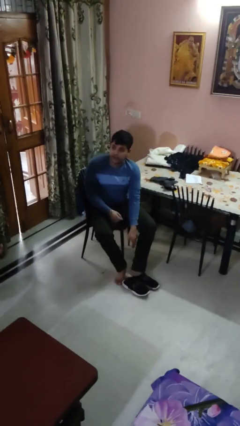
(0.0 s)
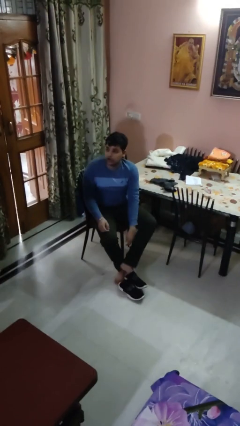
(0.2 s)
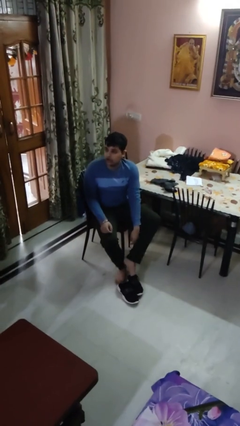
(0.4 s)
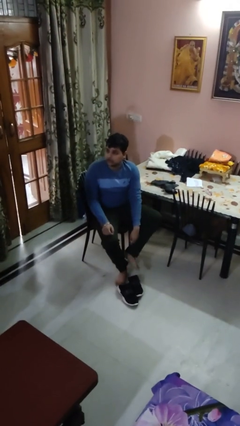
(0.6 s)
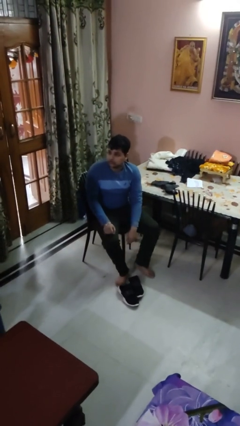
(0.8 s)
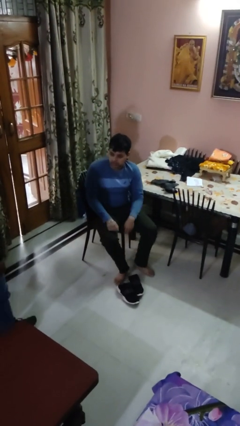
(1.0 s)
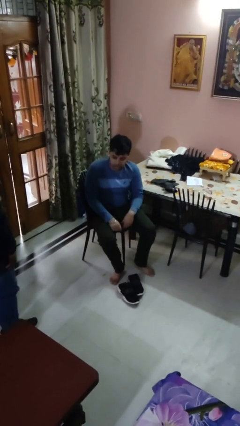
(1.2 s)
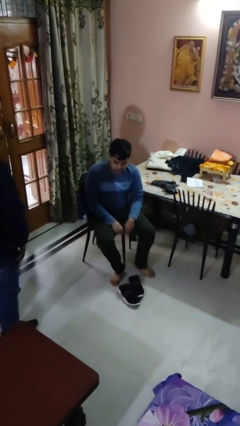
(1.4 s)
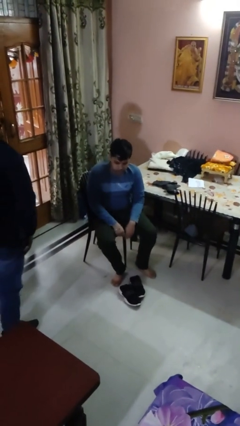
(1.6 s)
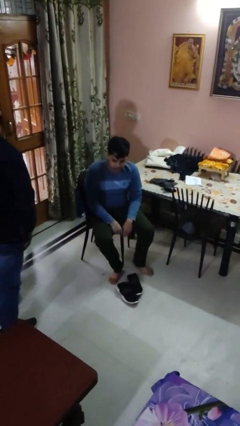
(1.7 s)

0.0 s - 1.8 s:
person takes off shoes

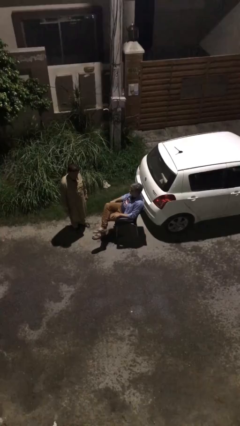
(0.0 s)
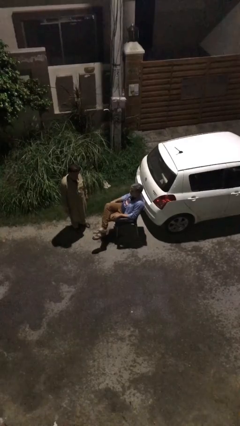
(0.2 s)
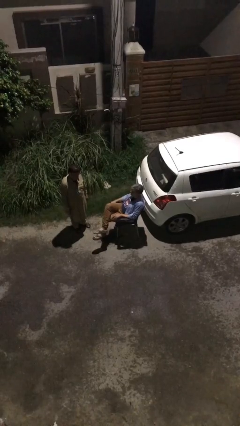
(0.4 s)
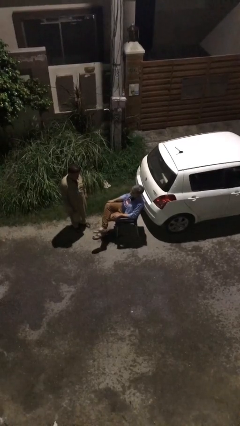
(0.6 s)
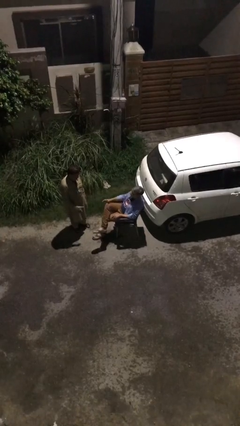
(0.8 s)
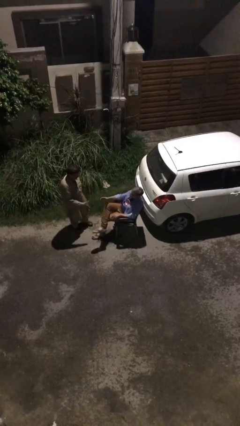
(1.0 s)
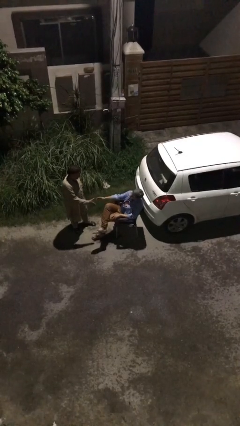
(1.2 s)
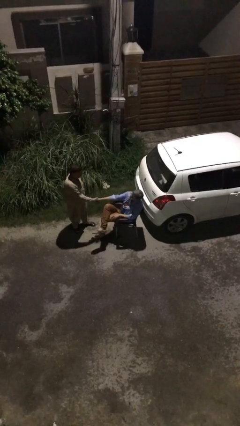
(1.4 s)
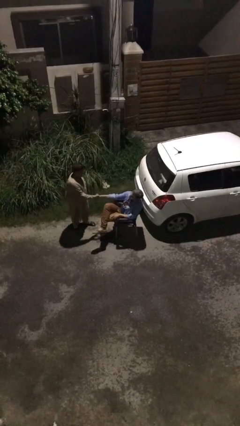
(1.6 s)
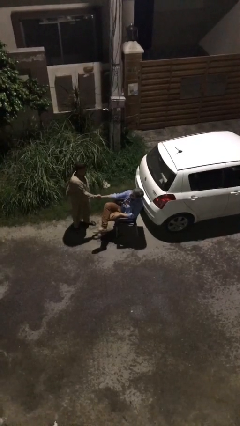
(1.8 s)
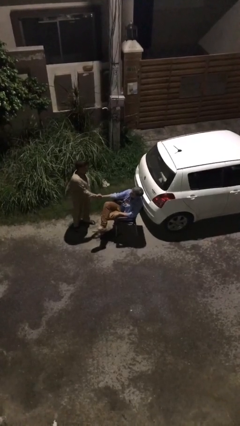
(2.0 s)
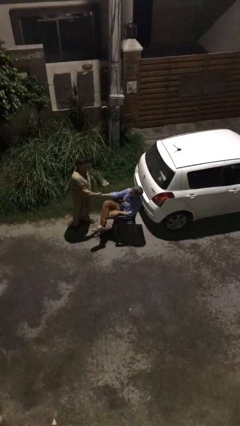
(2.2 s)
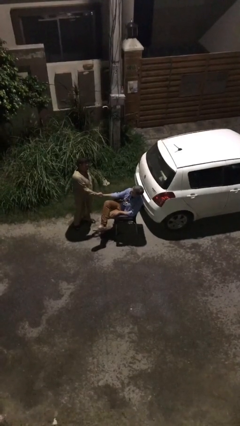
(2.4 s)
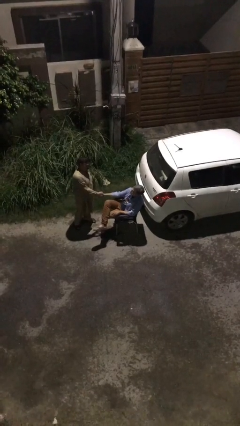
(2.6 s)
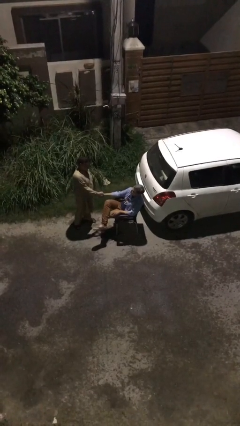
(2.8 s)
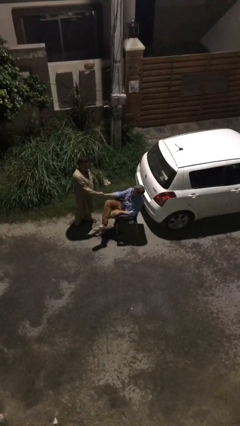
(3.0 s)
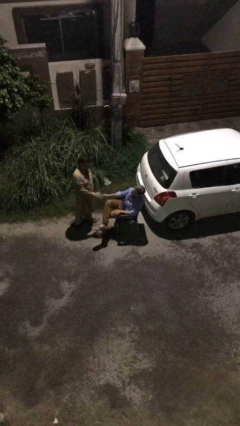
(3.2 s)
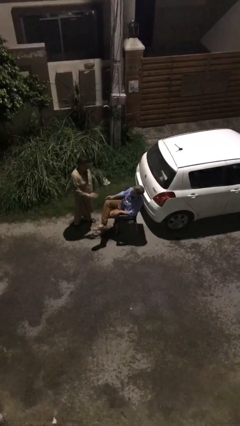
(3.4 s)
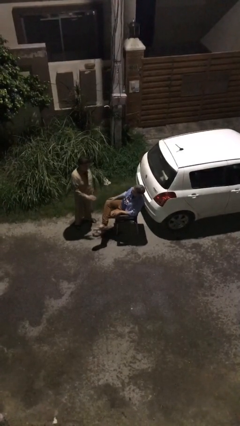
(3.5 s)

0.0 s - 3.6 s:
person shakes hand

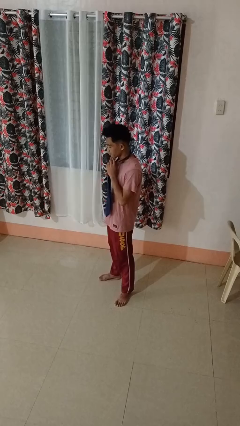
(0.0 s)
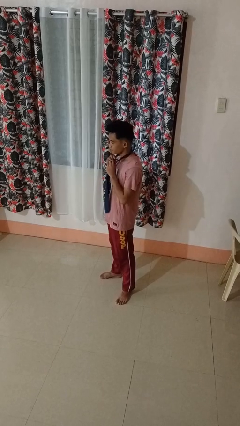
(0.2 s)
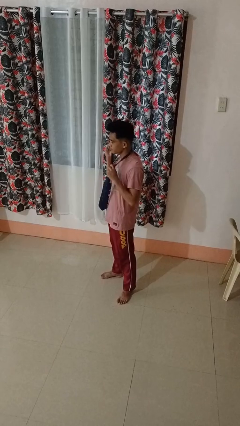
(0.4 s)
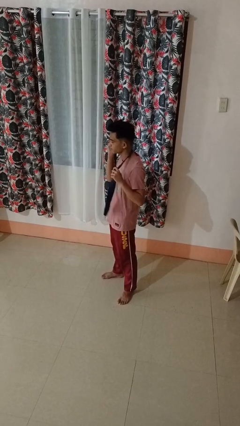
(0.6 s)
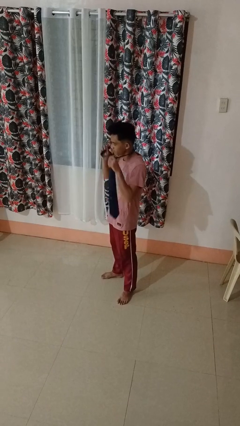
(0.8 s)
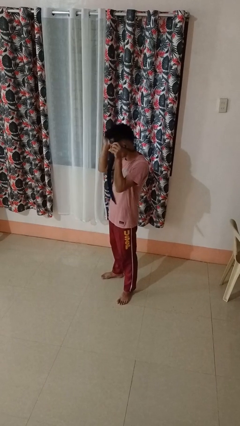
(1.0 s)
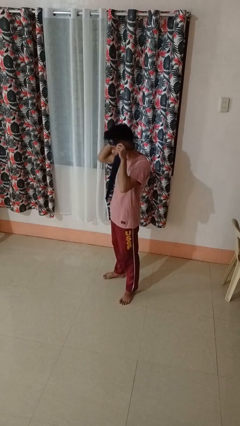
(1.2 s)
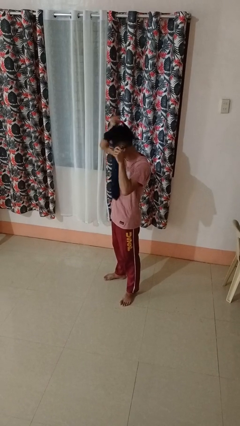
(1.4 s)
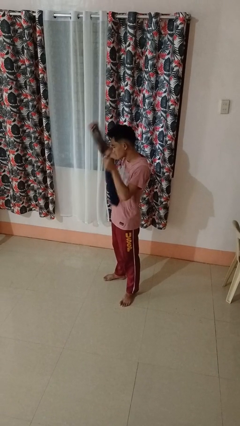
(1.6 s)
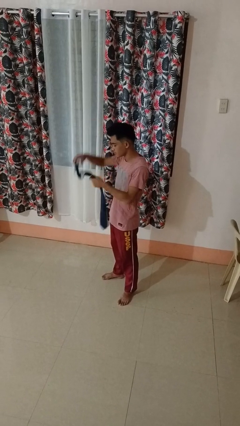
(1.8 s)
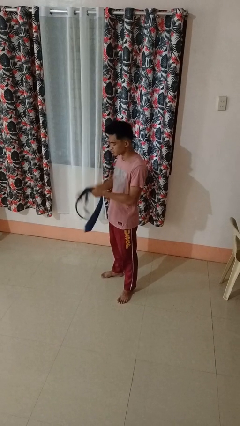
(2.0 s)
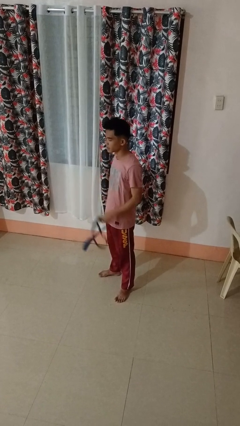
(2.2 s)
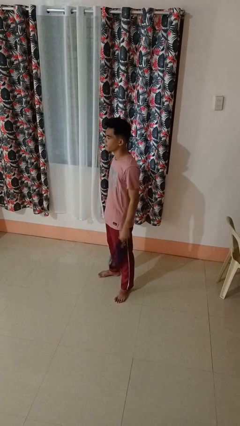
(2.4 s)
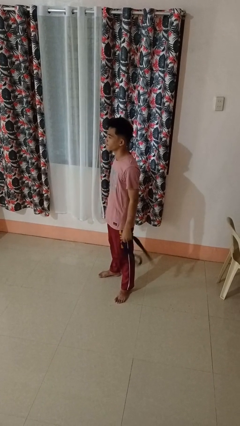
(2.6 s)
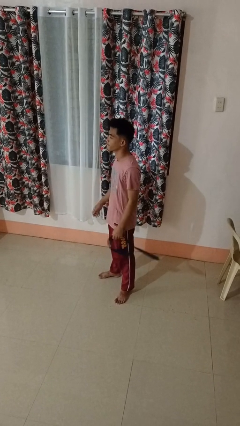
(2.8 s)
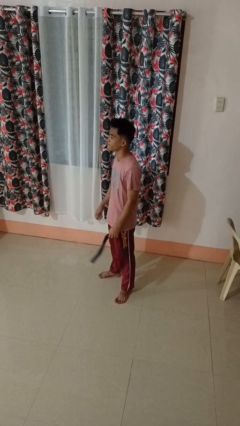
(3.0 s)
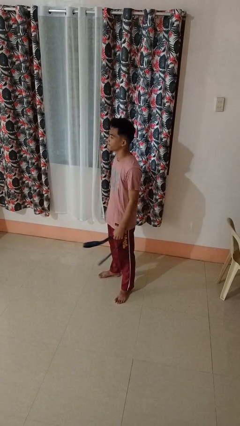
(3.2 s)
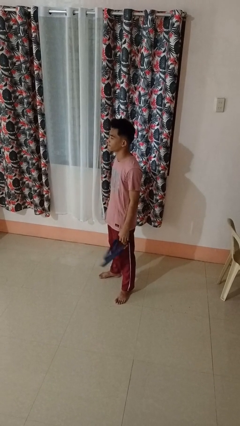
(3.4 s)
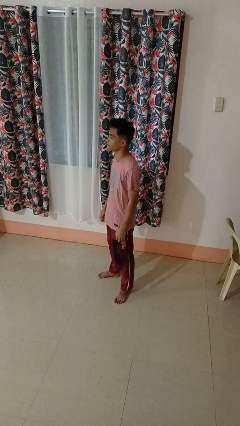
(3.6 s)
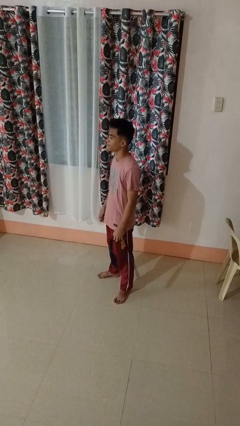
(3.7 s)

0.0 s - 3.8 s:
person takes off necktie

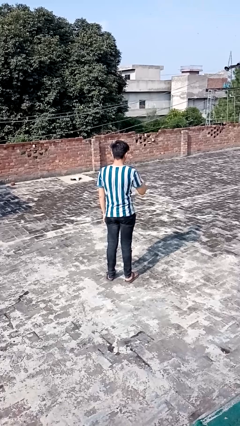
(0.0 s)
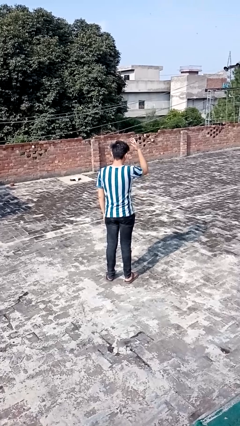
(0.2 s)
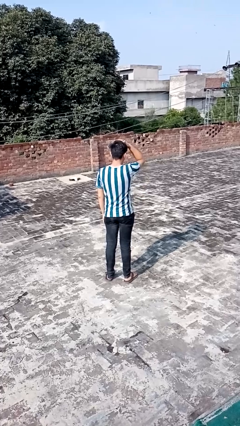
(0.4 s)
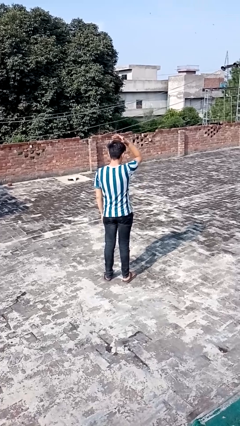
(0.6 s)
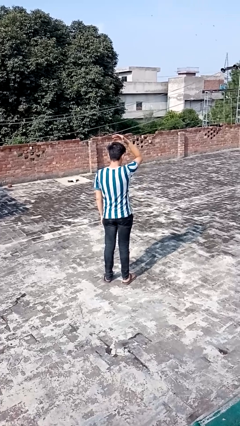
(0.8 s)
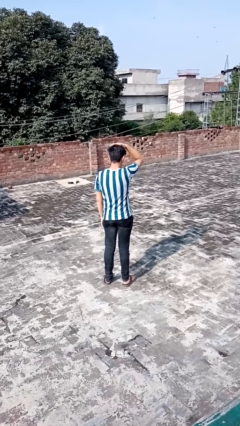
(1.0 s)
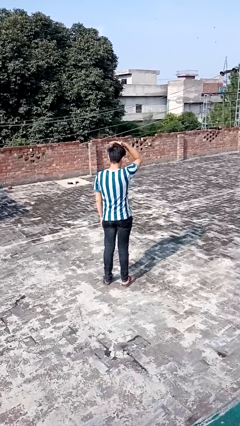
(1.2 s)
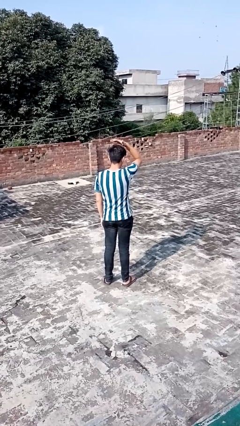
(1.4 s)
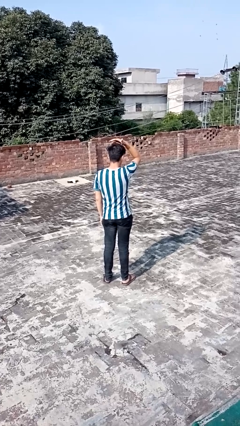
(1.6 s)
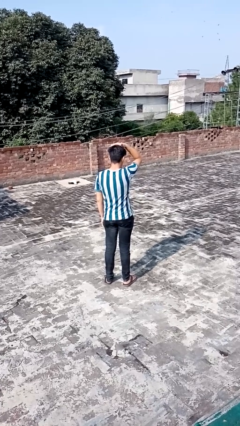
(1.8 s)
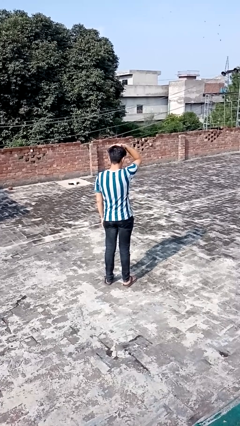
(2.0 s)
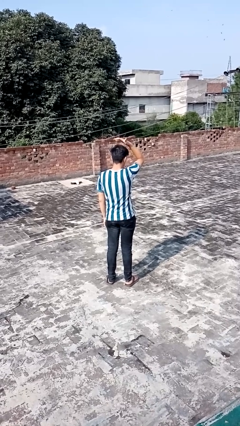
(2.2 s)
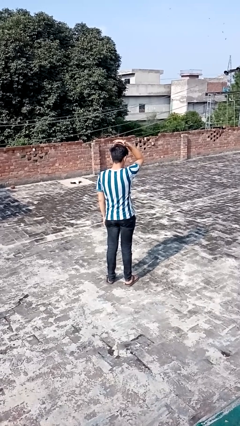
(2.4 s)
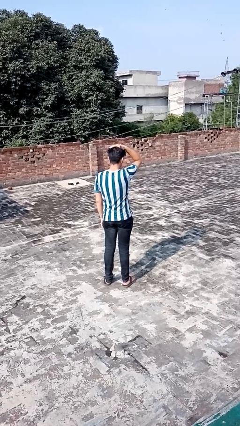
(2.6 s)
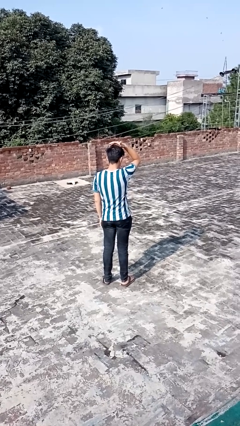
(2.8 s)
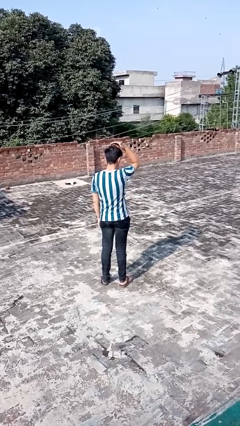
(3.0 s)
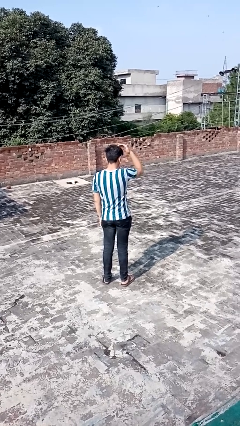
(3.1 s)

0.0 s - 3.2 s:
person pats head

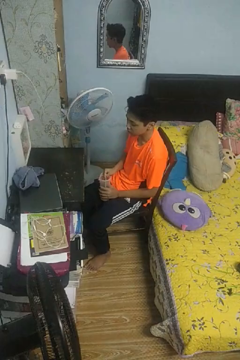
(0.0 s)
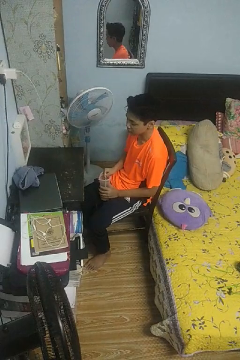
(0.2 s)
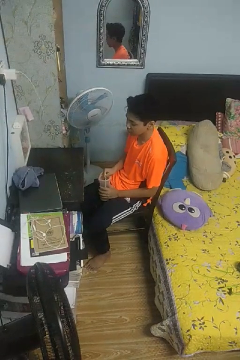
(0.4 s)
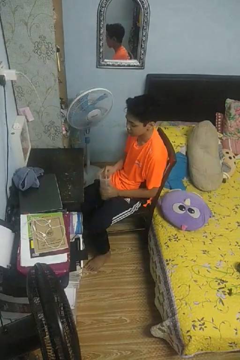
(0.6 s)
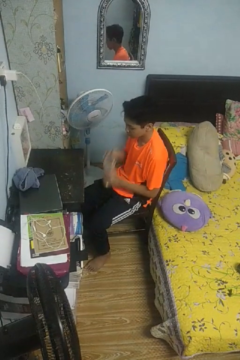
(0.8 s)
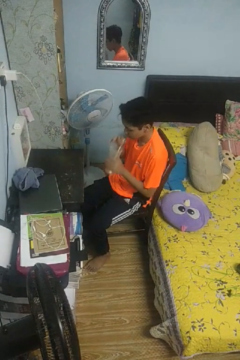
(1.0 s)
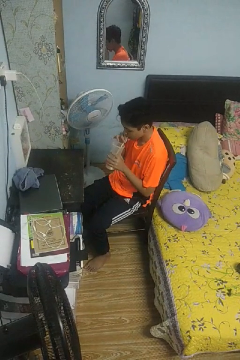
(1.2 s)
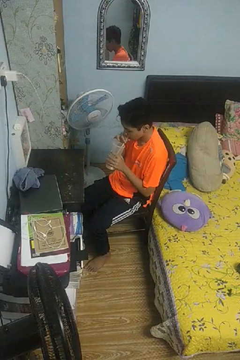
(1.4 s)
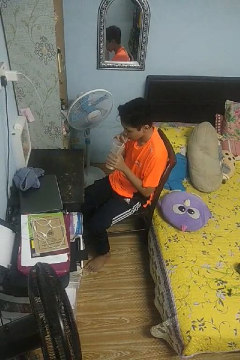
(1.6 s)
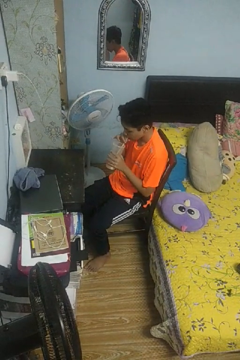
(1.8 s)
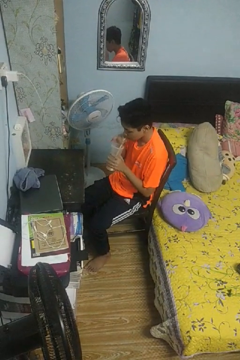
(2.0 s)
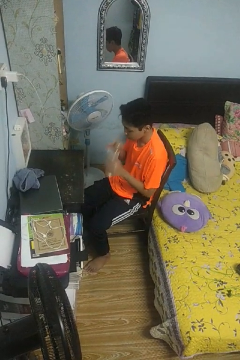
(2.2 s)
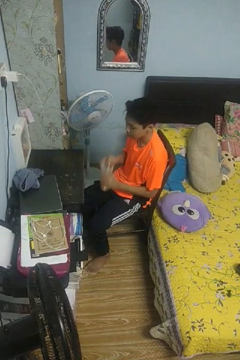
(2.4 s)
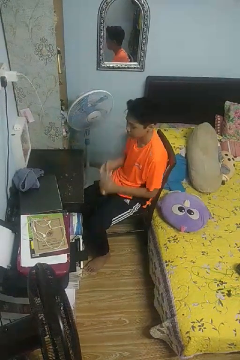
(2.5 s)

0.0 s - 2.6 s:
person drinks from straw

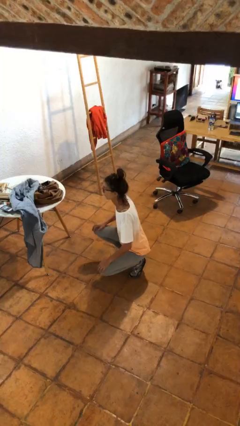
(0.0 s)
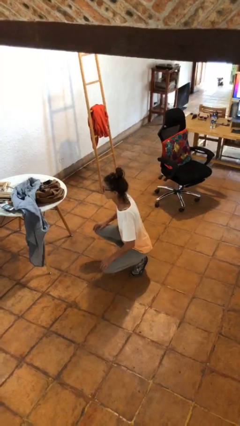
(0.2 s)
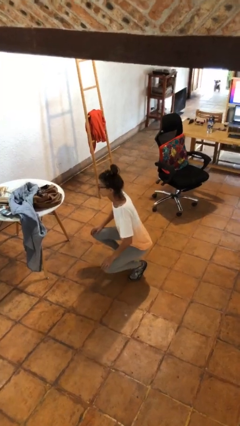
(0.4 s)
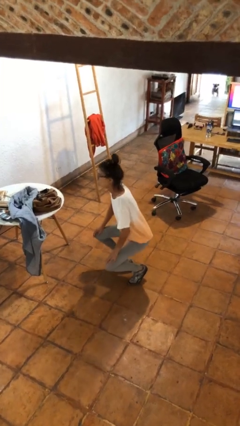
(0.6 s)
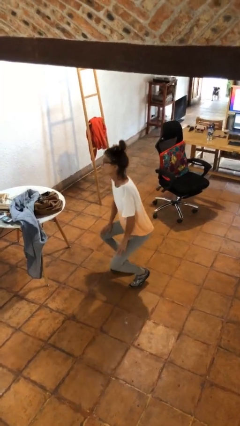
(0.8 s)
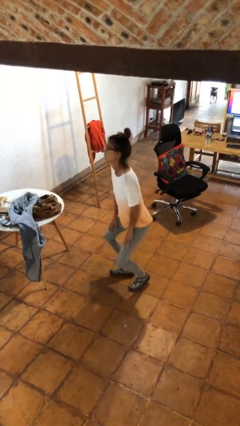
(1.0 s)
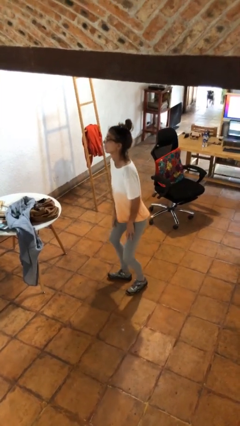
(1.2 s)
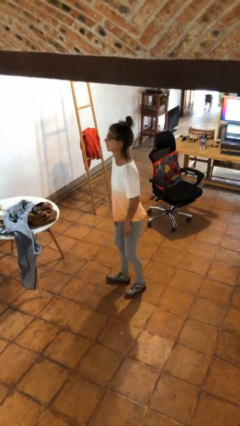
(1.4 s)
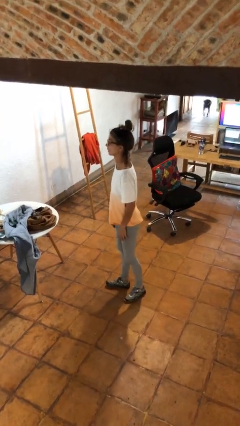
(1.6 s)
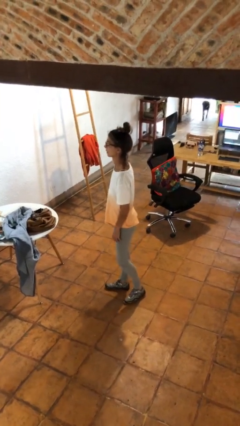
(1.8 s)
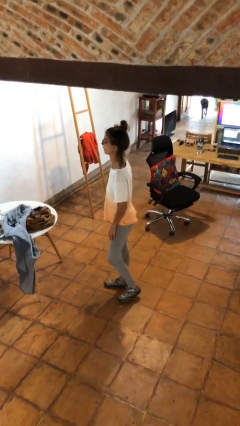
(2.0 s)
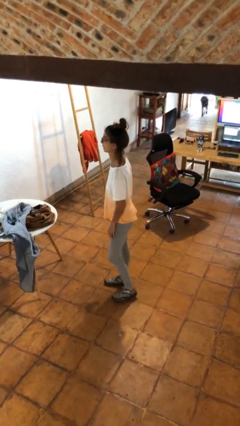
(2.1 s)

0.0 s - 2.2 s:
person stands up

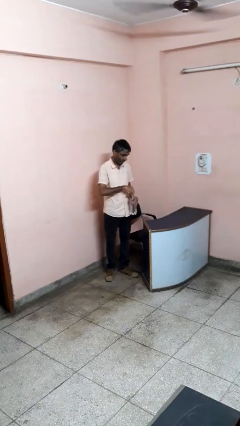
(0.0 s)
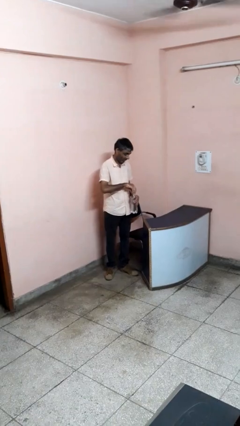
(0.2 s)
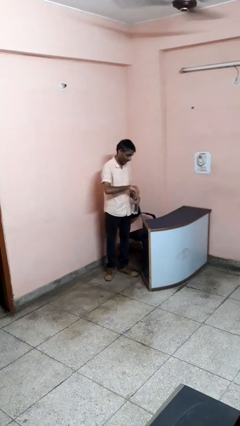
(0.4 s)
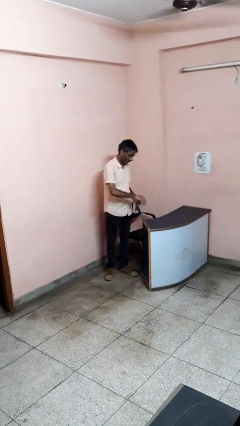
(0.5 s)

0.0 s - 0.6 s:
person unscrews lid from bottle
